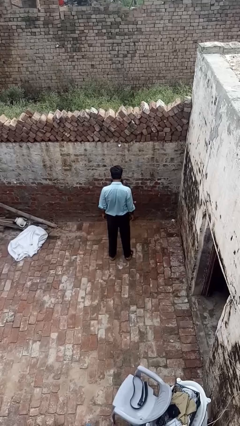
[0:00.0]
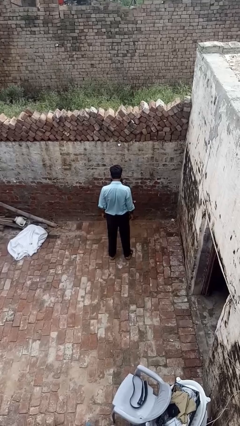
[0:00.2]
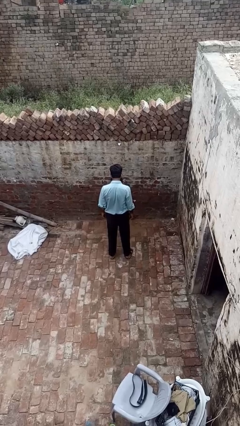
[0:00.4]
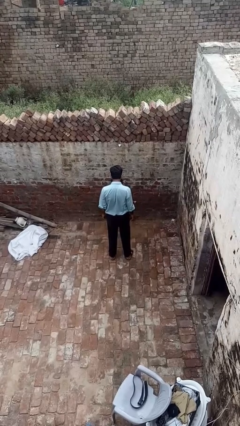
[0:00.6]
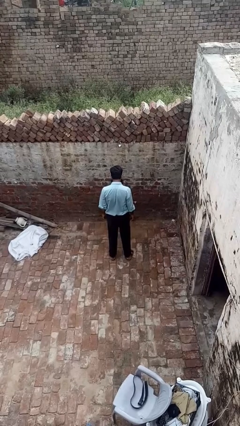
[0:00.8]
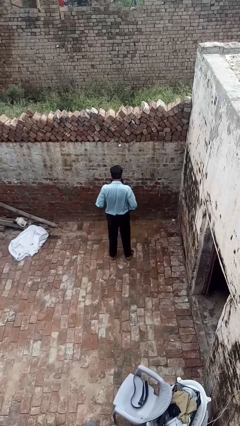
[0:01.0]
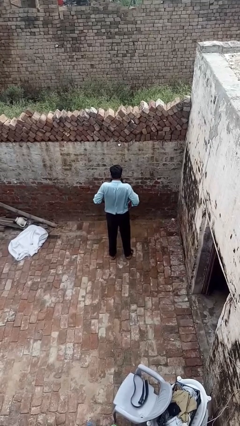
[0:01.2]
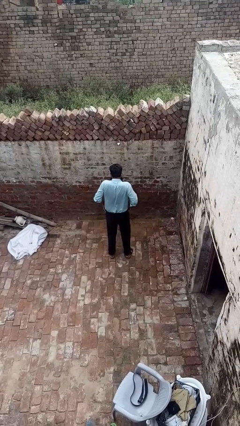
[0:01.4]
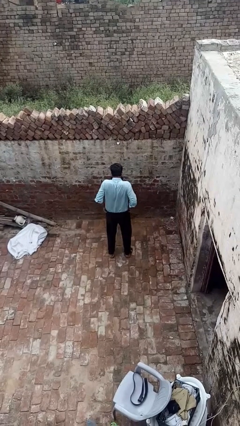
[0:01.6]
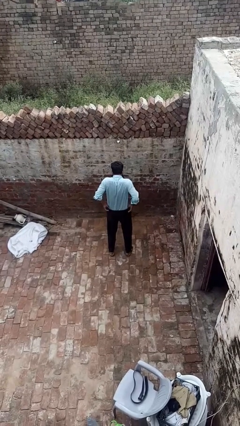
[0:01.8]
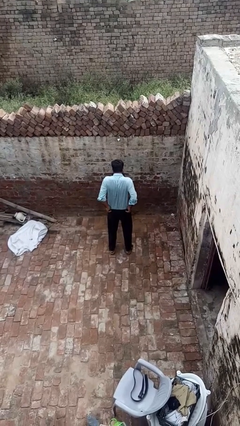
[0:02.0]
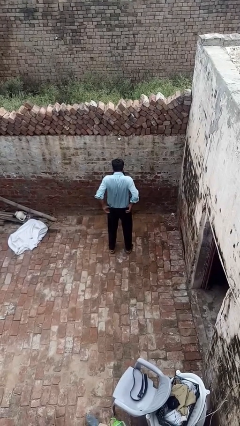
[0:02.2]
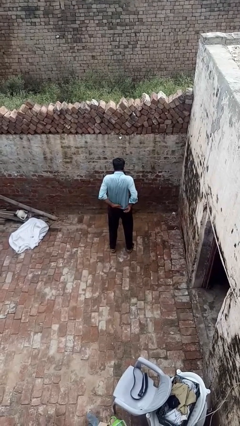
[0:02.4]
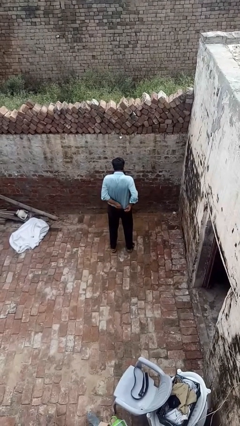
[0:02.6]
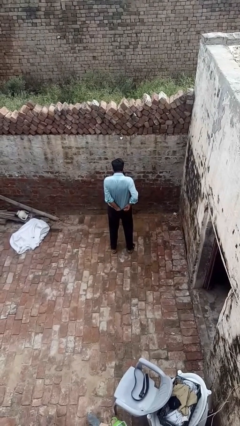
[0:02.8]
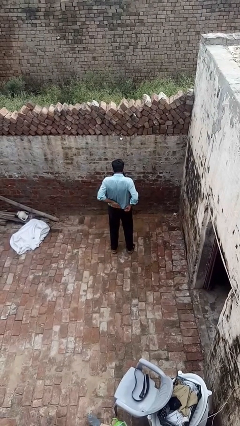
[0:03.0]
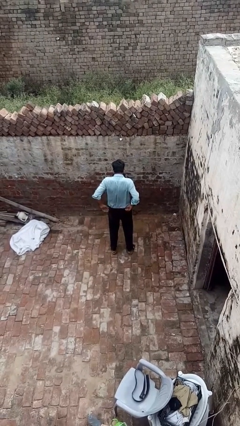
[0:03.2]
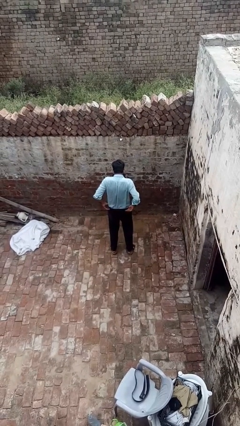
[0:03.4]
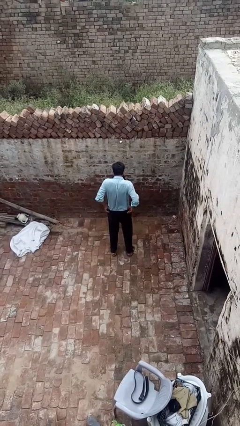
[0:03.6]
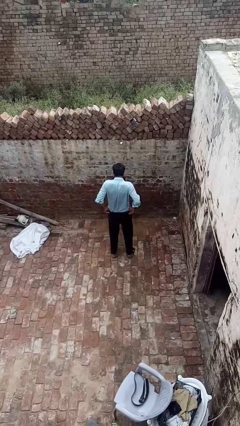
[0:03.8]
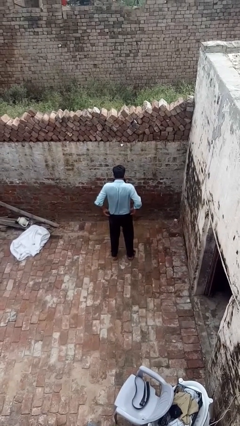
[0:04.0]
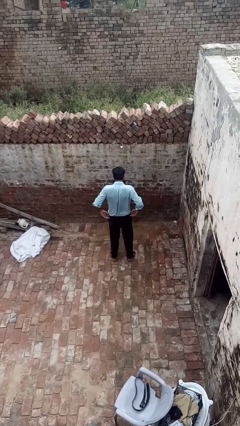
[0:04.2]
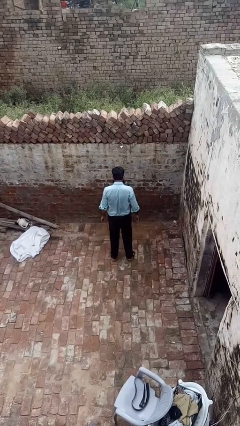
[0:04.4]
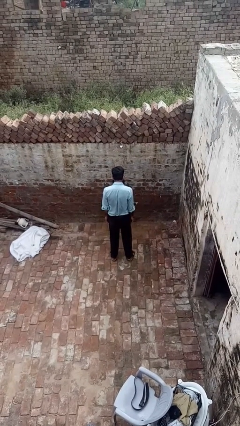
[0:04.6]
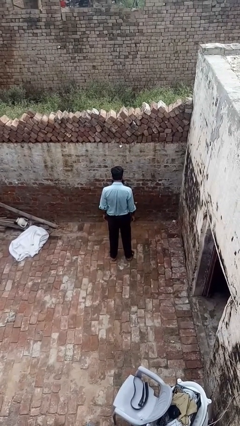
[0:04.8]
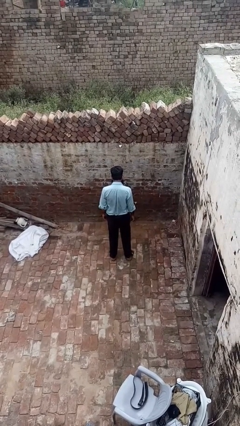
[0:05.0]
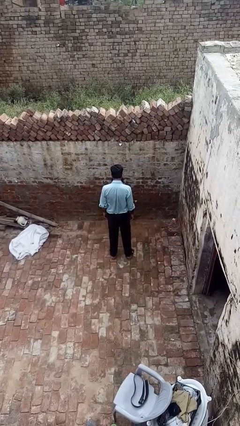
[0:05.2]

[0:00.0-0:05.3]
person hikes up pants

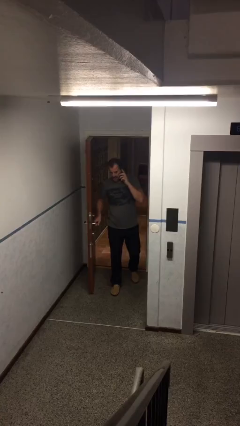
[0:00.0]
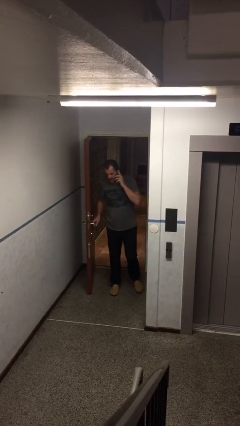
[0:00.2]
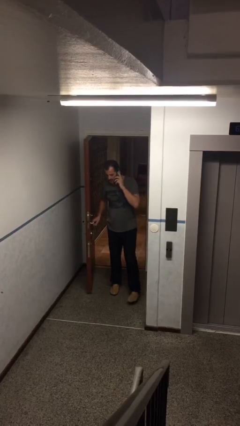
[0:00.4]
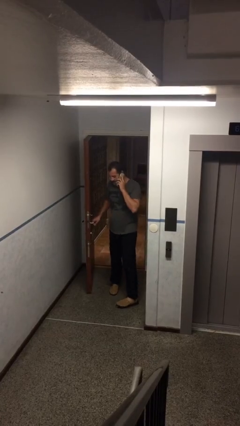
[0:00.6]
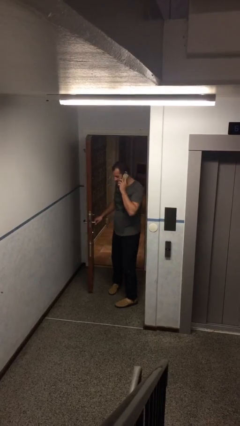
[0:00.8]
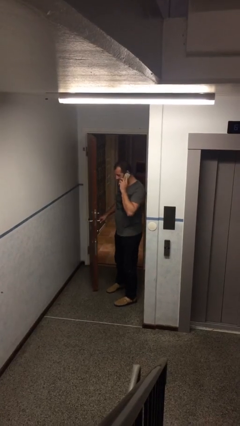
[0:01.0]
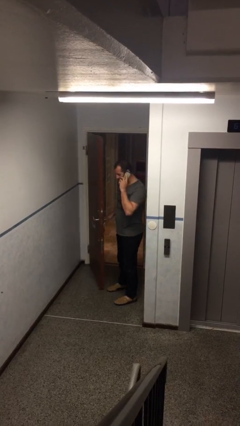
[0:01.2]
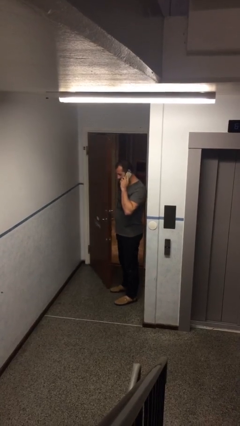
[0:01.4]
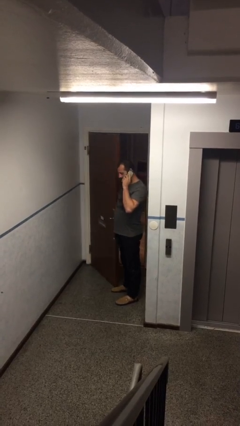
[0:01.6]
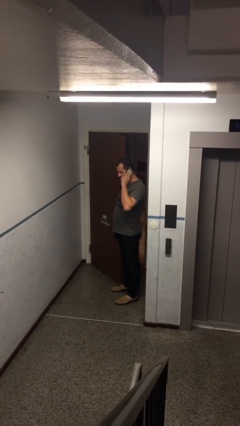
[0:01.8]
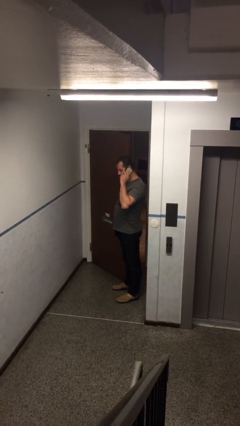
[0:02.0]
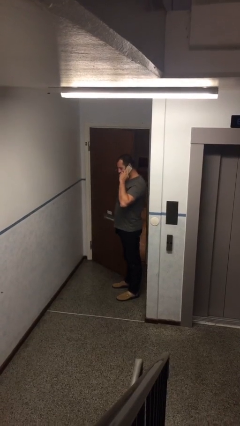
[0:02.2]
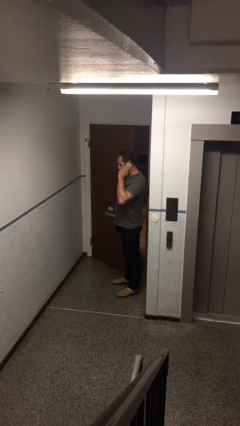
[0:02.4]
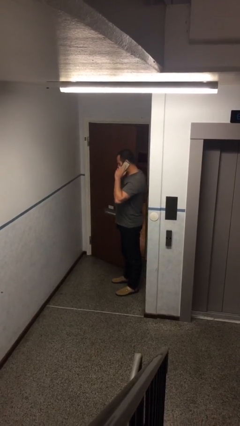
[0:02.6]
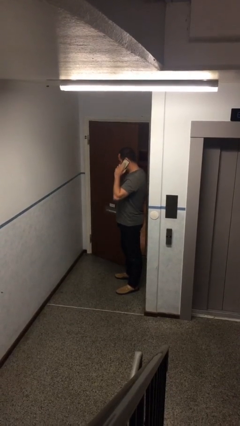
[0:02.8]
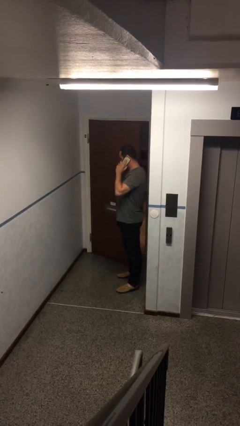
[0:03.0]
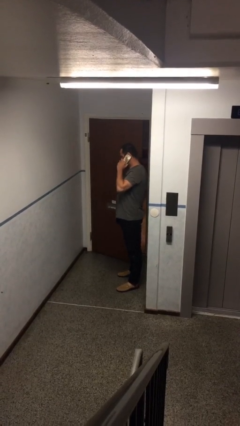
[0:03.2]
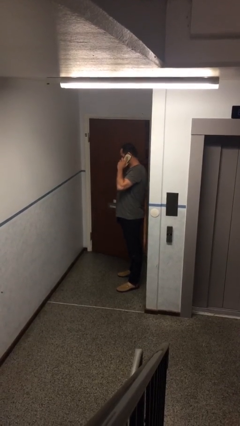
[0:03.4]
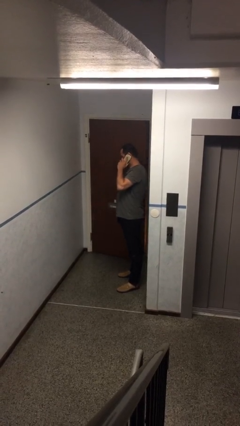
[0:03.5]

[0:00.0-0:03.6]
person enters scene through structure

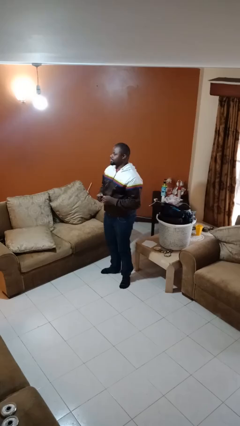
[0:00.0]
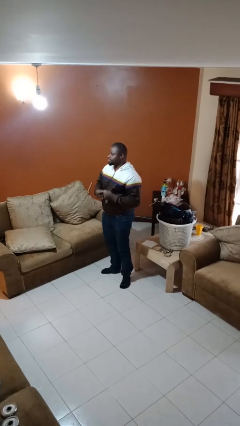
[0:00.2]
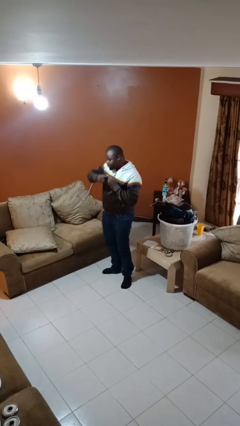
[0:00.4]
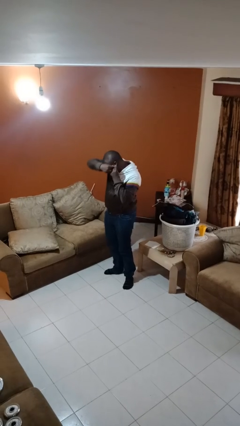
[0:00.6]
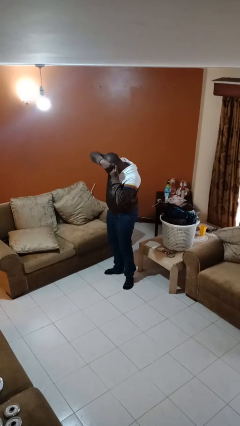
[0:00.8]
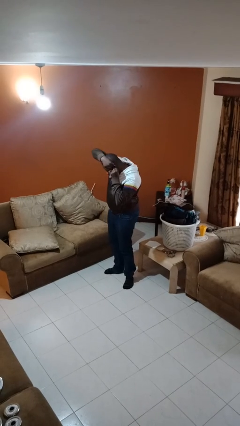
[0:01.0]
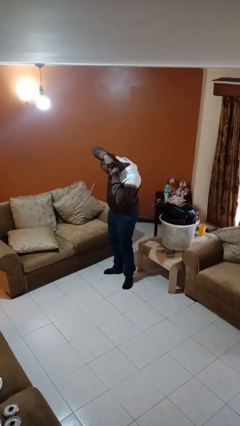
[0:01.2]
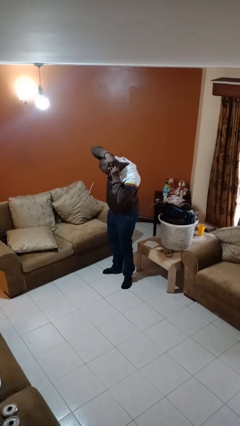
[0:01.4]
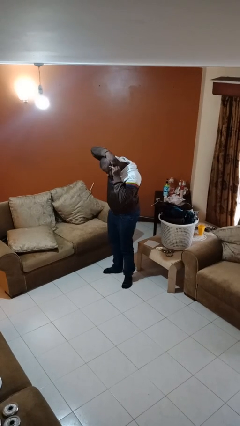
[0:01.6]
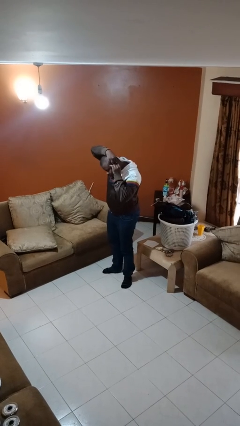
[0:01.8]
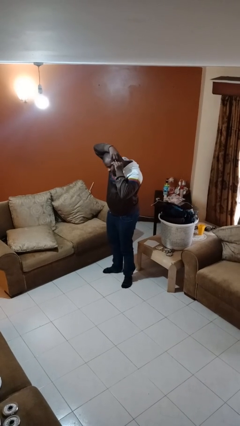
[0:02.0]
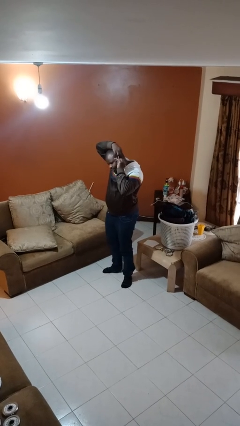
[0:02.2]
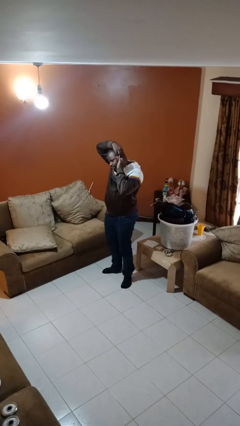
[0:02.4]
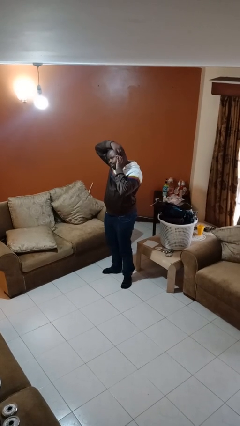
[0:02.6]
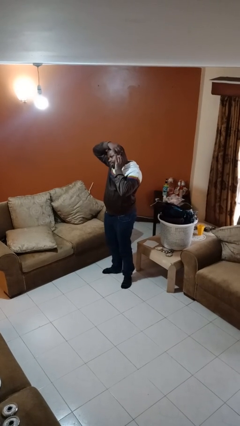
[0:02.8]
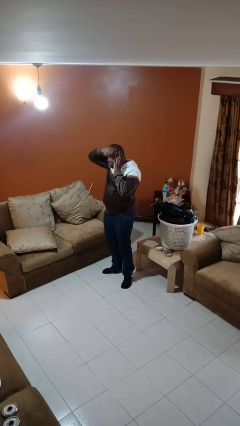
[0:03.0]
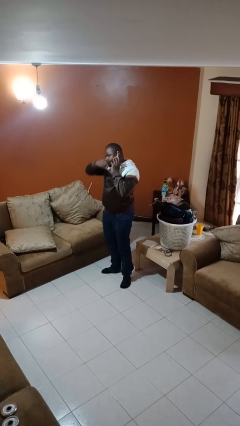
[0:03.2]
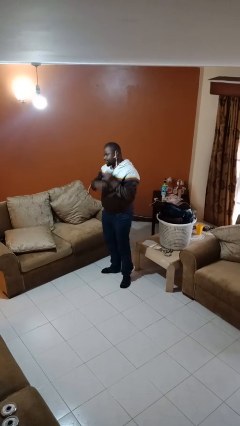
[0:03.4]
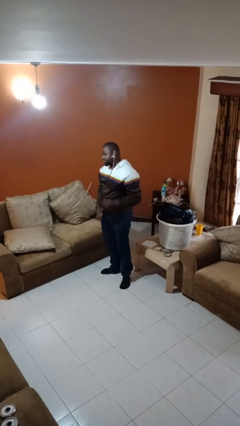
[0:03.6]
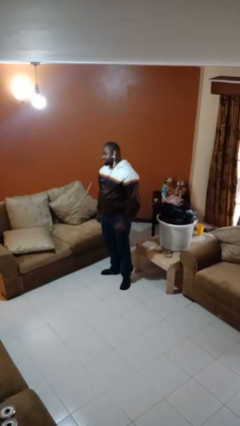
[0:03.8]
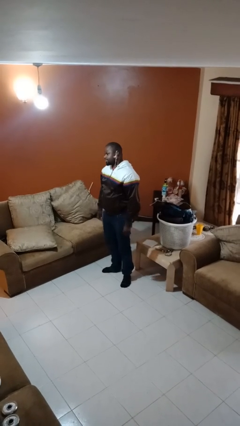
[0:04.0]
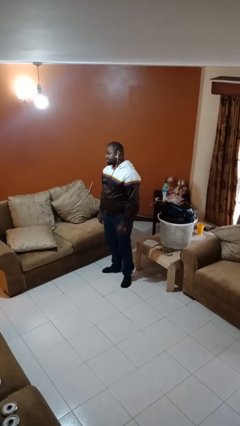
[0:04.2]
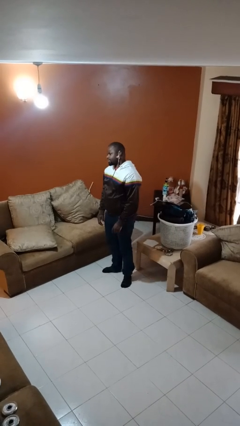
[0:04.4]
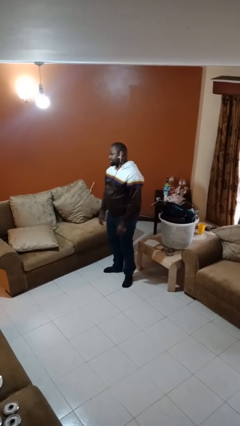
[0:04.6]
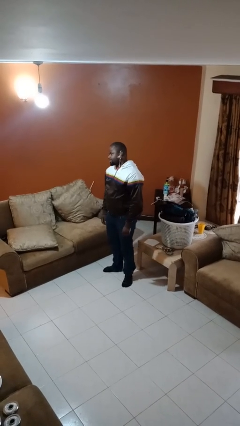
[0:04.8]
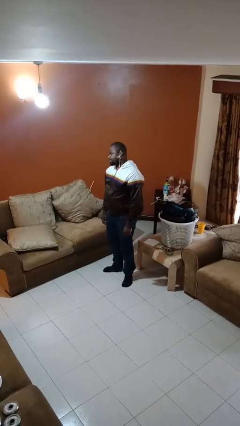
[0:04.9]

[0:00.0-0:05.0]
person puts on earrings

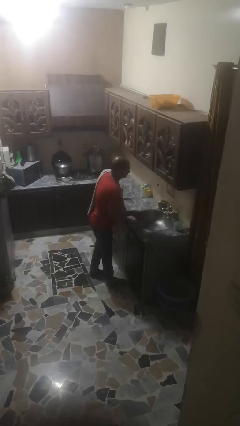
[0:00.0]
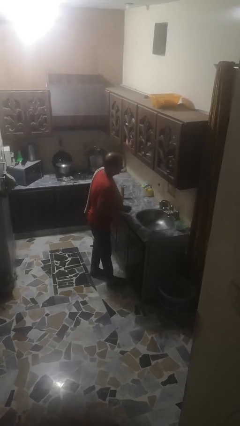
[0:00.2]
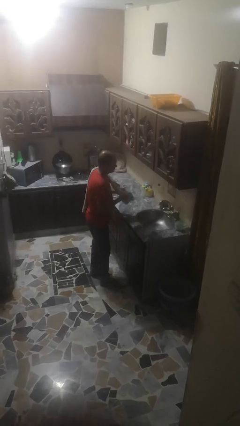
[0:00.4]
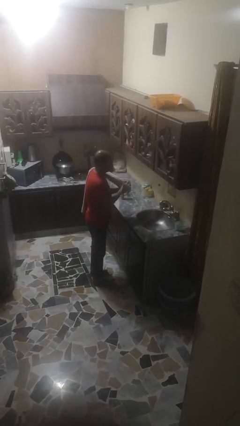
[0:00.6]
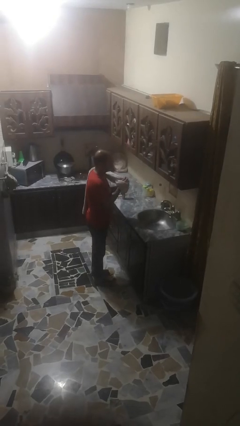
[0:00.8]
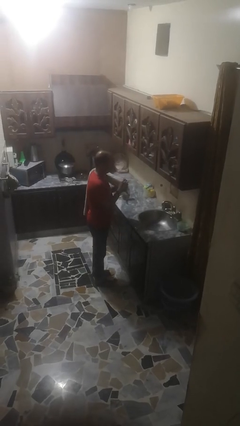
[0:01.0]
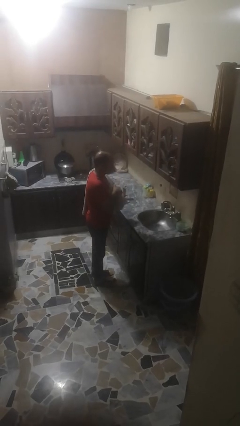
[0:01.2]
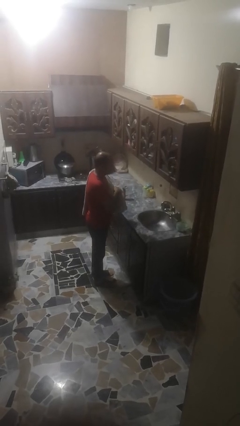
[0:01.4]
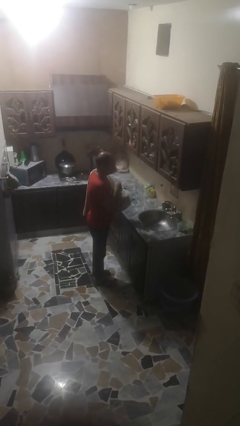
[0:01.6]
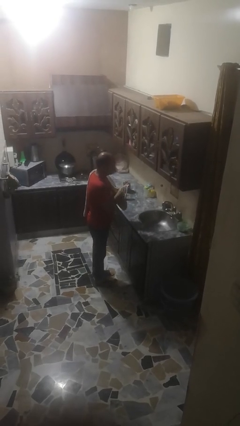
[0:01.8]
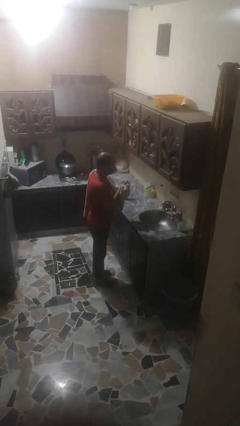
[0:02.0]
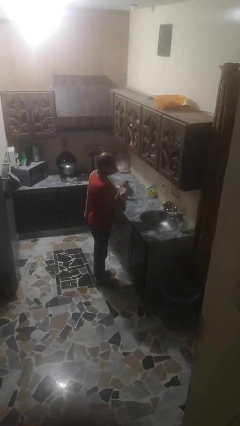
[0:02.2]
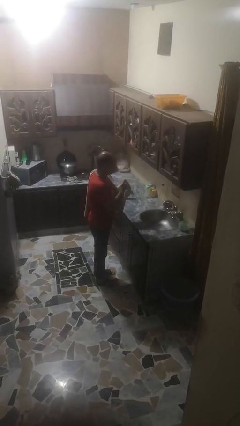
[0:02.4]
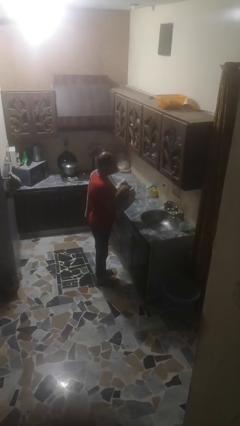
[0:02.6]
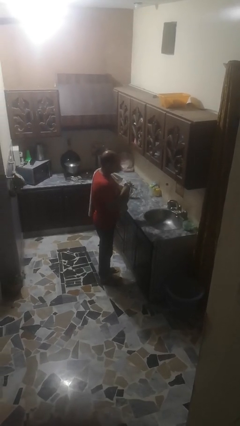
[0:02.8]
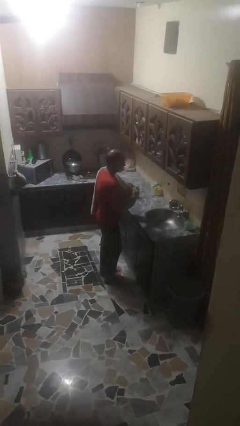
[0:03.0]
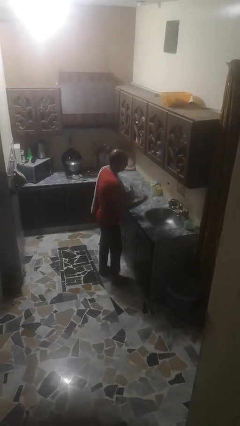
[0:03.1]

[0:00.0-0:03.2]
person dries hands with towel

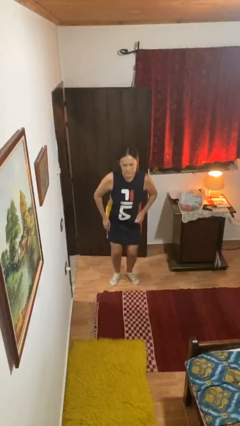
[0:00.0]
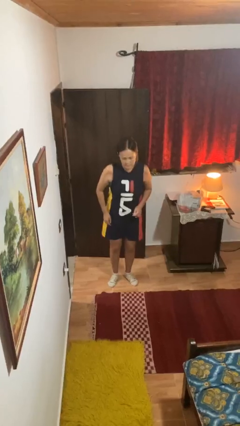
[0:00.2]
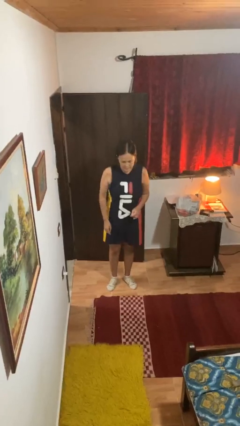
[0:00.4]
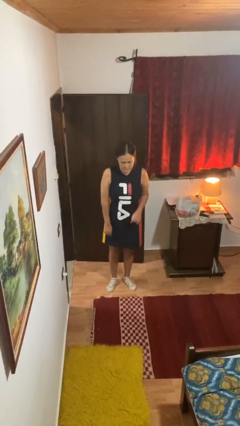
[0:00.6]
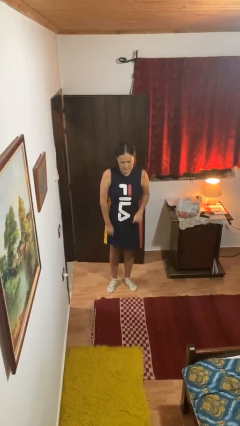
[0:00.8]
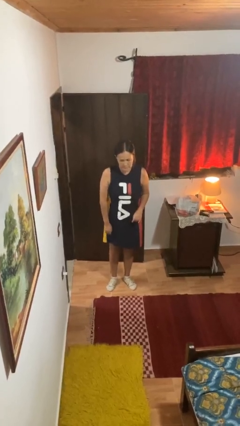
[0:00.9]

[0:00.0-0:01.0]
person stands up
